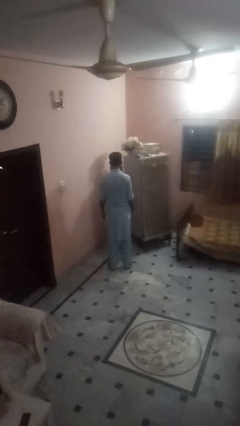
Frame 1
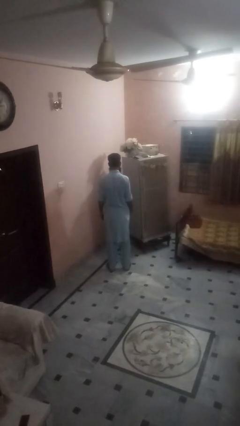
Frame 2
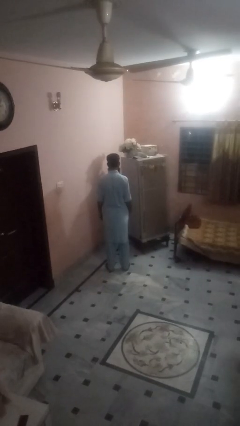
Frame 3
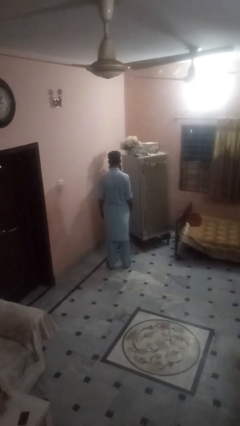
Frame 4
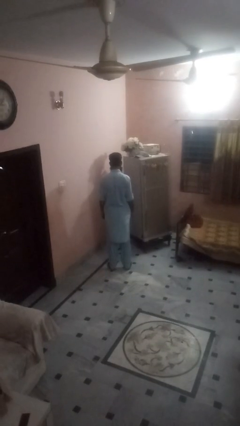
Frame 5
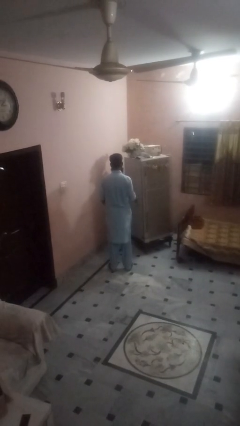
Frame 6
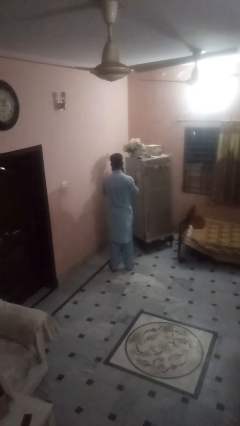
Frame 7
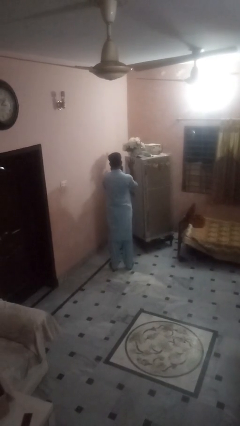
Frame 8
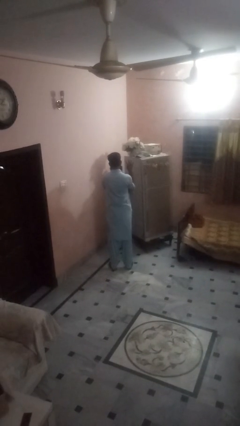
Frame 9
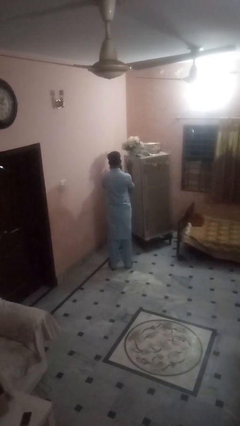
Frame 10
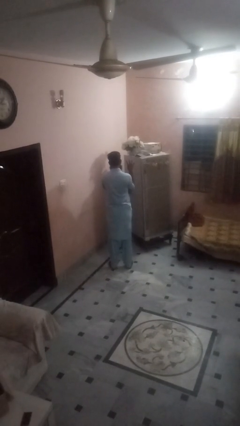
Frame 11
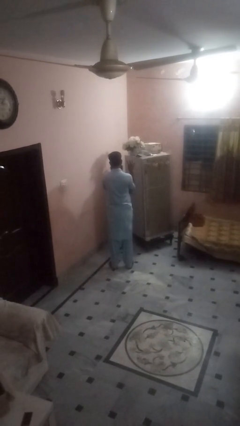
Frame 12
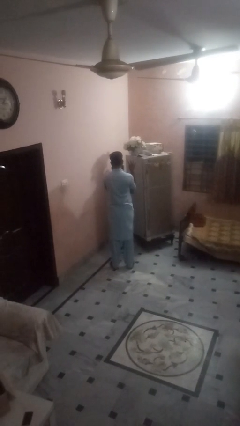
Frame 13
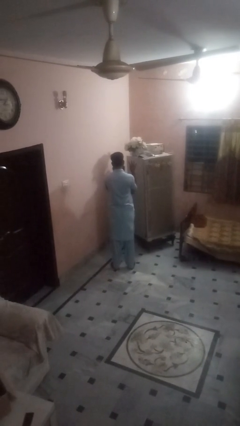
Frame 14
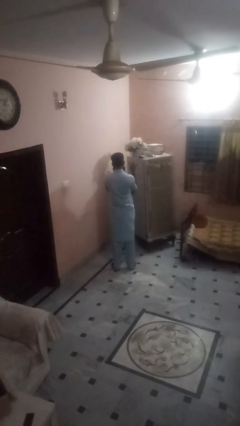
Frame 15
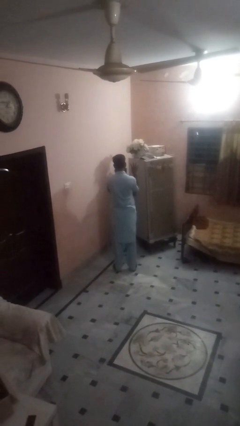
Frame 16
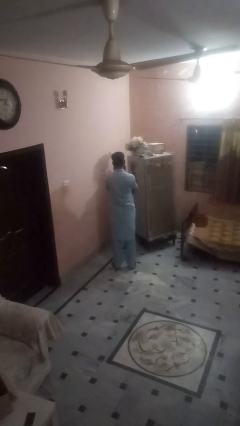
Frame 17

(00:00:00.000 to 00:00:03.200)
person gestures number four

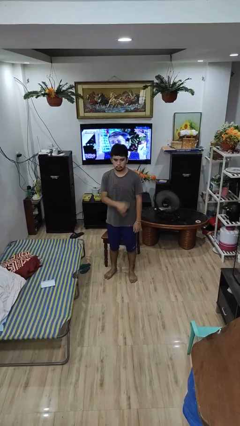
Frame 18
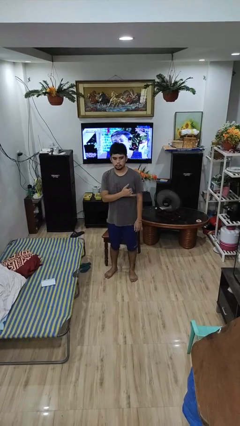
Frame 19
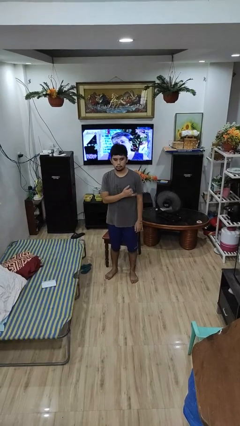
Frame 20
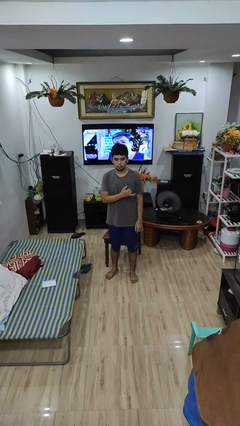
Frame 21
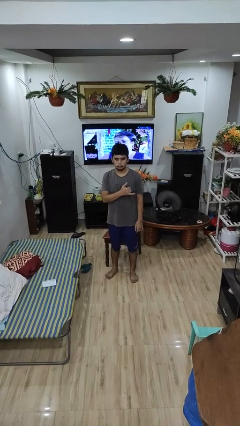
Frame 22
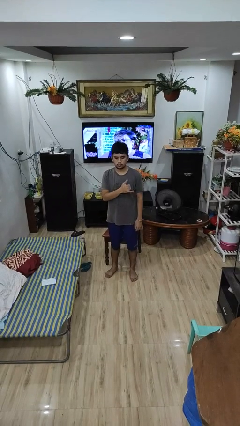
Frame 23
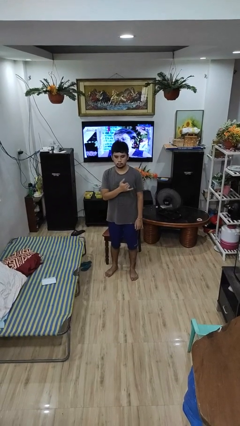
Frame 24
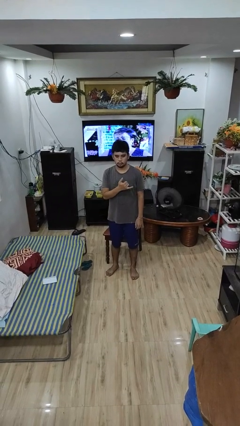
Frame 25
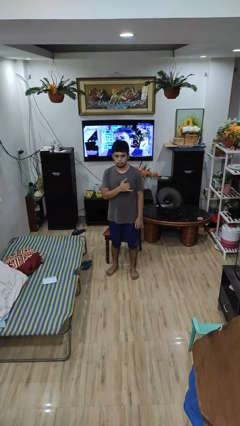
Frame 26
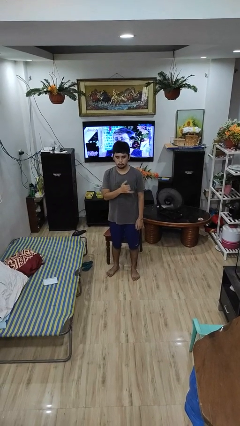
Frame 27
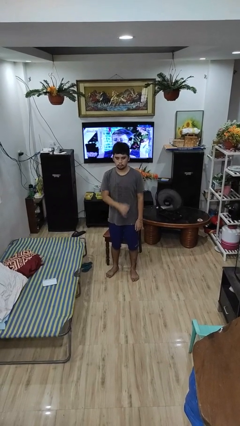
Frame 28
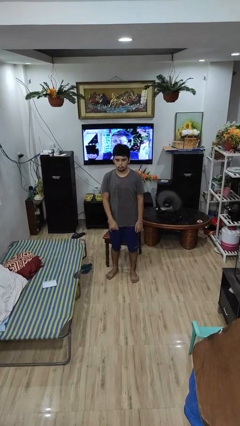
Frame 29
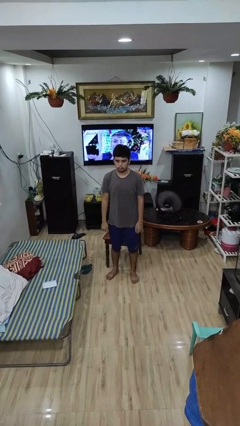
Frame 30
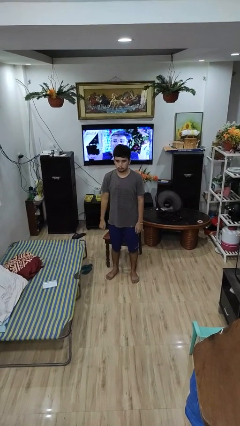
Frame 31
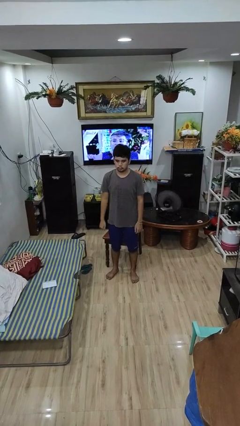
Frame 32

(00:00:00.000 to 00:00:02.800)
person gestures hang loose

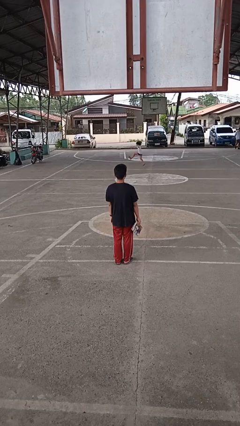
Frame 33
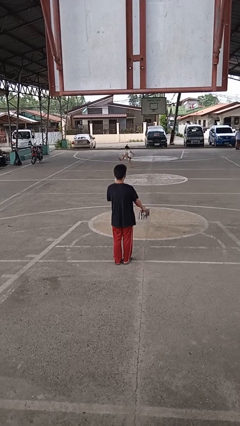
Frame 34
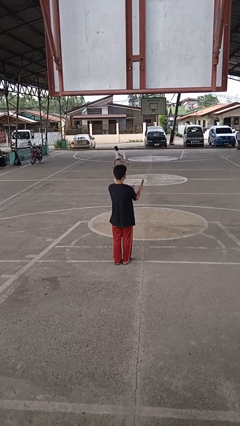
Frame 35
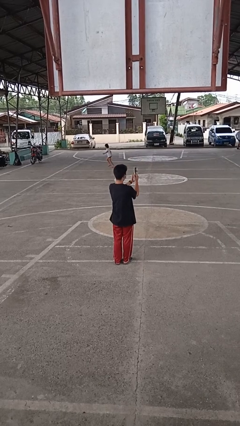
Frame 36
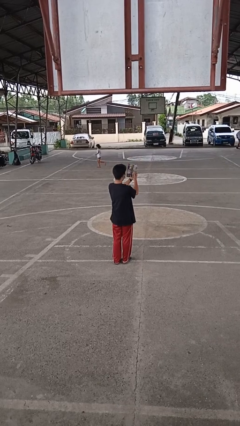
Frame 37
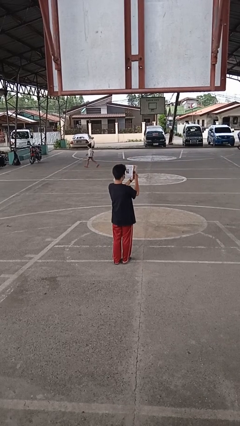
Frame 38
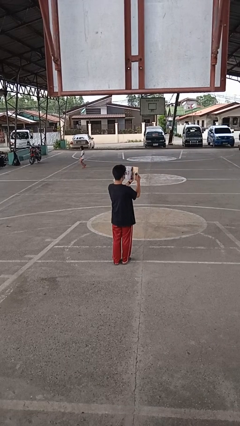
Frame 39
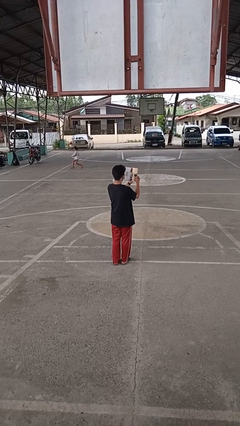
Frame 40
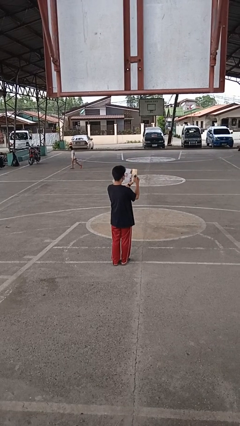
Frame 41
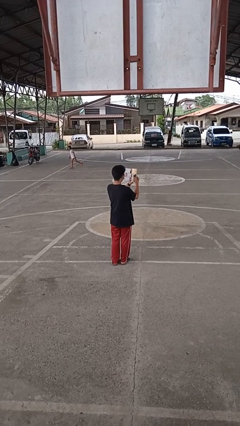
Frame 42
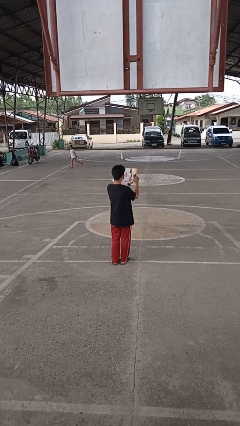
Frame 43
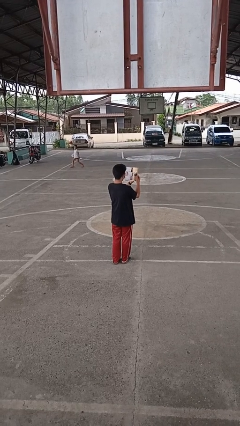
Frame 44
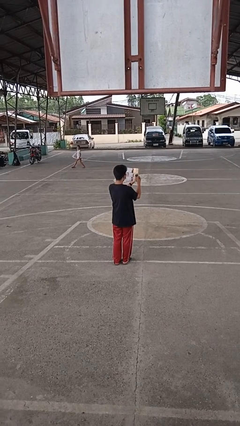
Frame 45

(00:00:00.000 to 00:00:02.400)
person reads magazine

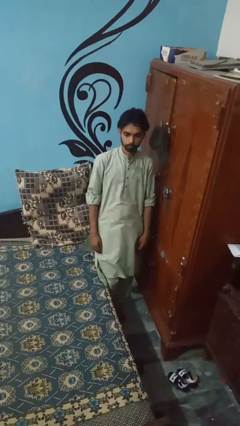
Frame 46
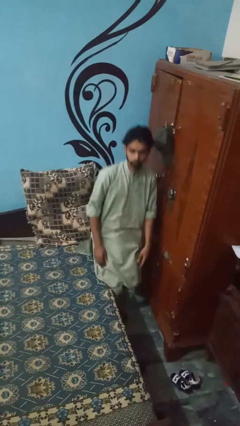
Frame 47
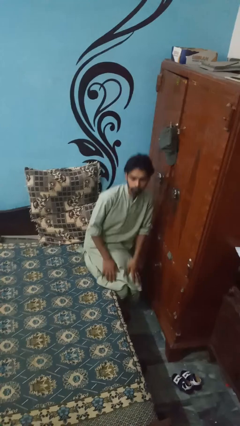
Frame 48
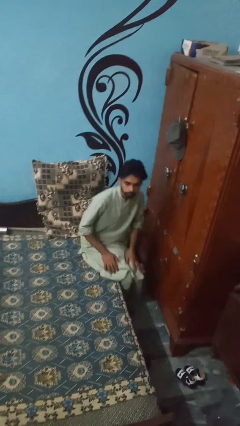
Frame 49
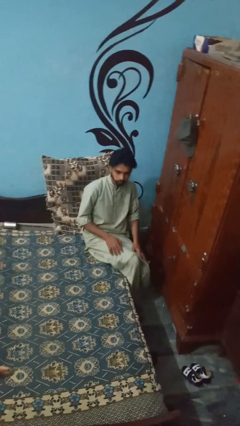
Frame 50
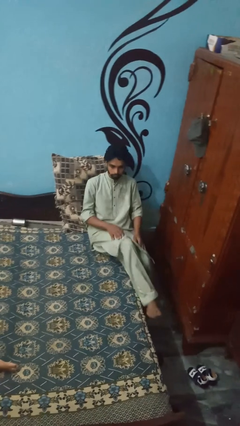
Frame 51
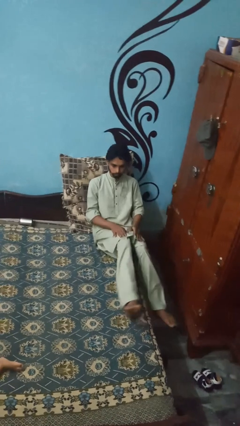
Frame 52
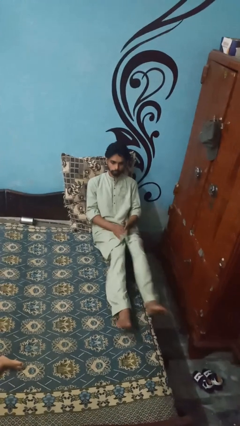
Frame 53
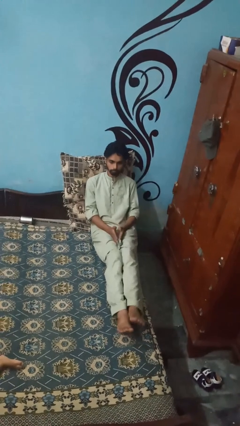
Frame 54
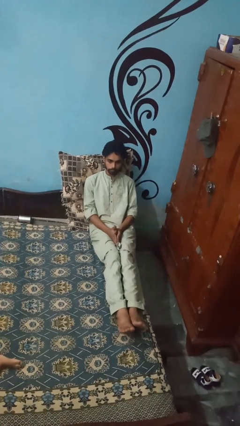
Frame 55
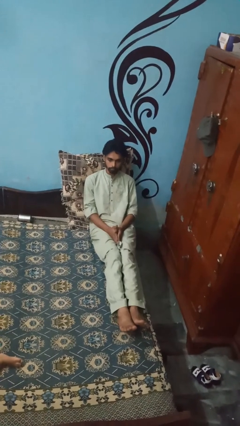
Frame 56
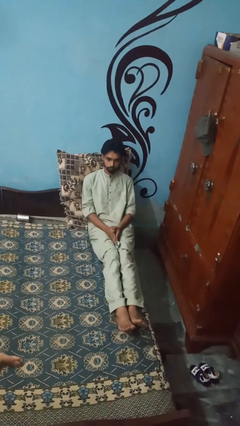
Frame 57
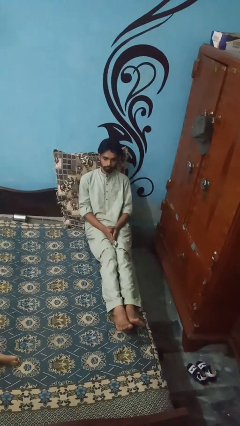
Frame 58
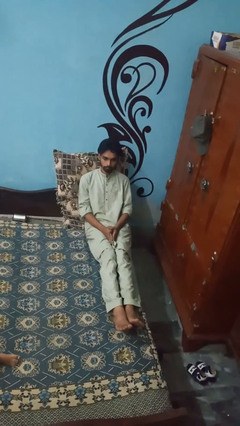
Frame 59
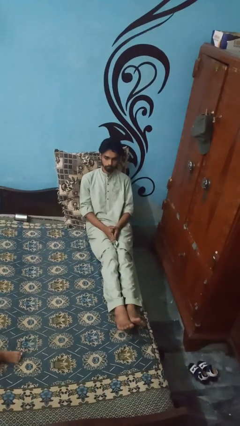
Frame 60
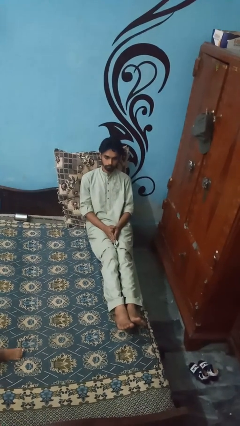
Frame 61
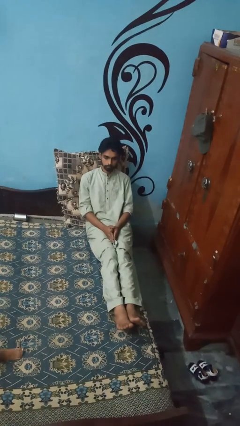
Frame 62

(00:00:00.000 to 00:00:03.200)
person lies down on bed

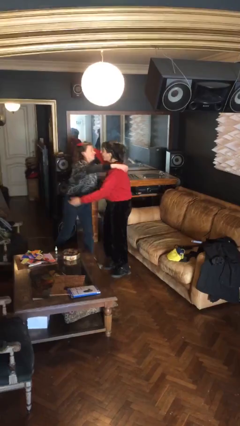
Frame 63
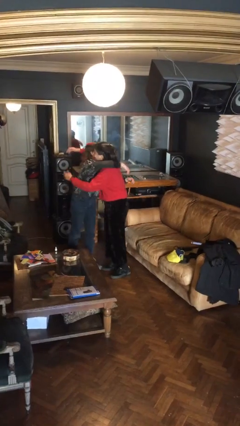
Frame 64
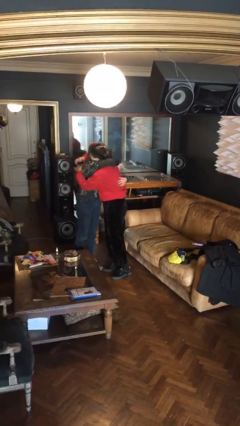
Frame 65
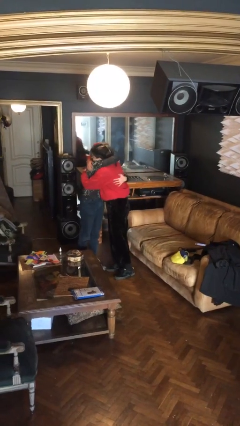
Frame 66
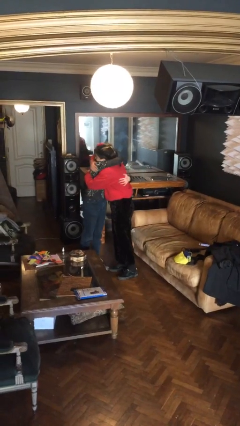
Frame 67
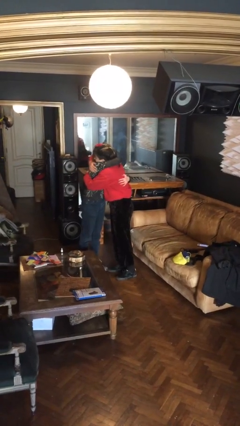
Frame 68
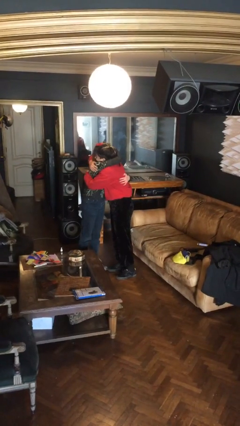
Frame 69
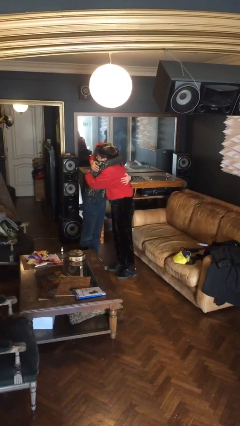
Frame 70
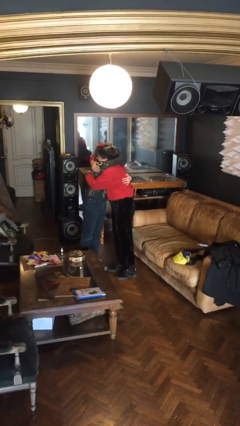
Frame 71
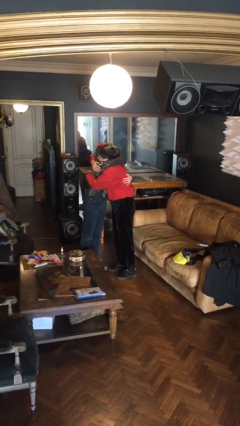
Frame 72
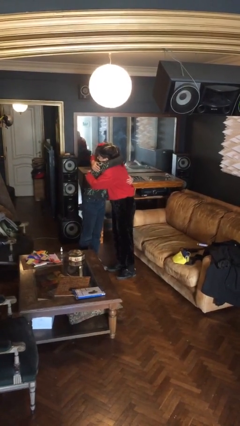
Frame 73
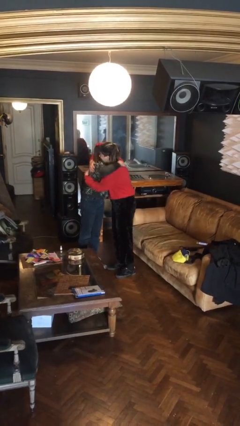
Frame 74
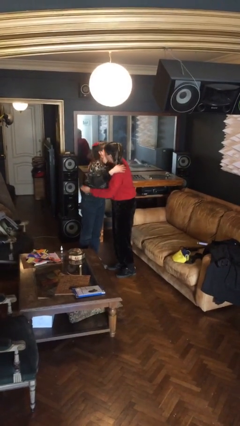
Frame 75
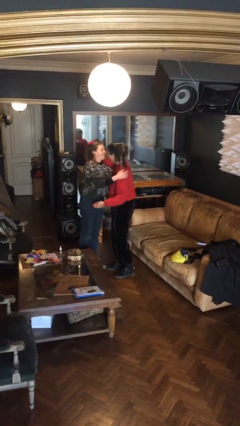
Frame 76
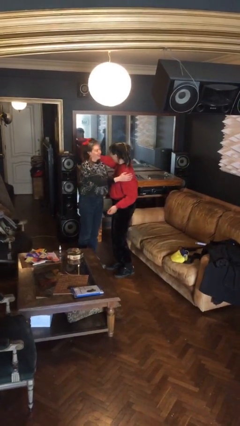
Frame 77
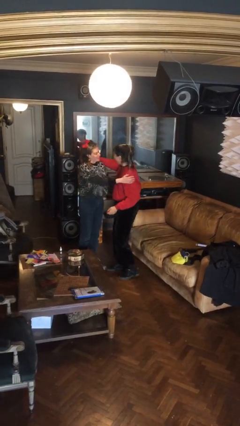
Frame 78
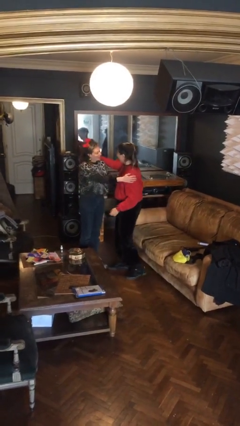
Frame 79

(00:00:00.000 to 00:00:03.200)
person embraces person

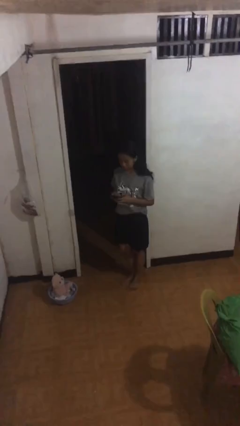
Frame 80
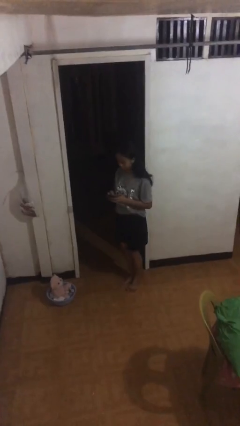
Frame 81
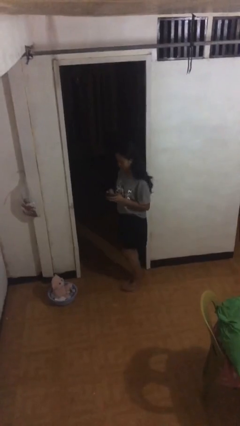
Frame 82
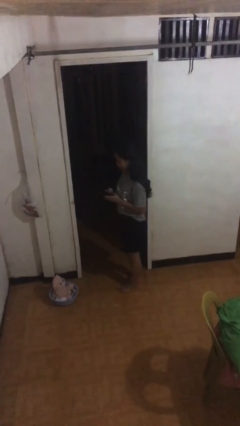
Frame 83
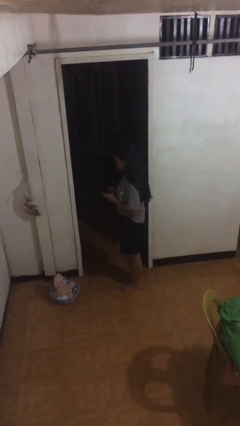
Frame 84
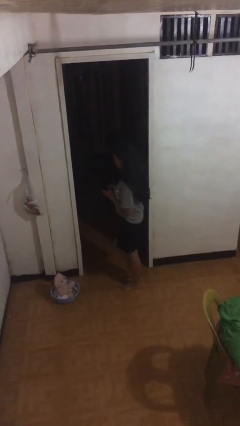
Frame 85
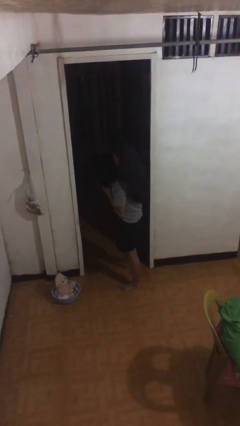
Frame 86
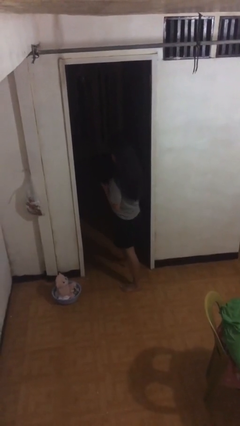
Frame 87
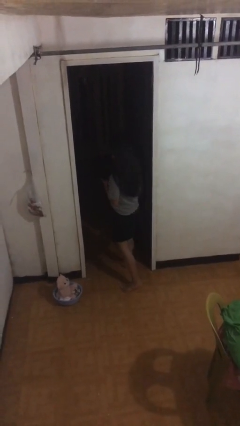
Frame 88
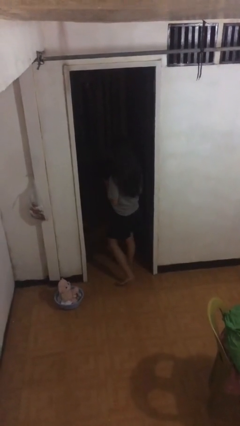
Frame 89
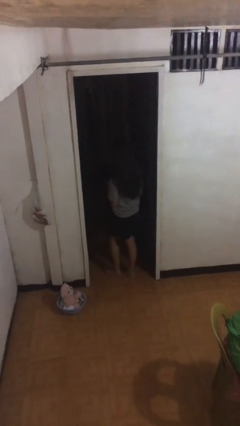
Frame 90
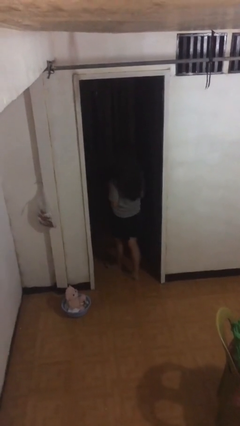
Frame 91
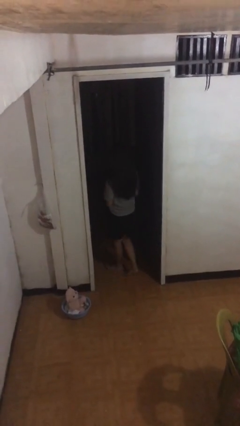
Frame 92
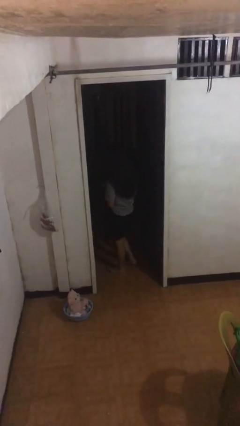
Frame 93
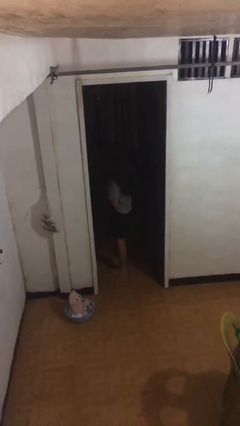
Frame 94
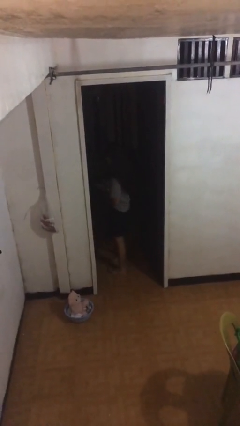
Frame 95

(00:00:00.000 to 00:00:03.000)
person exits scene through structure
